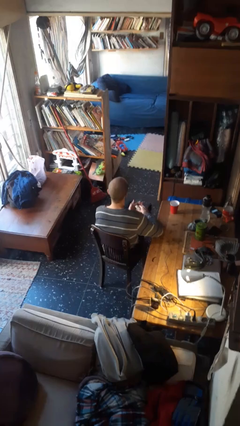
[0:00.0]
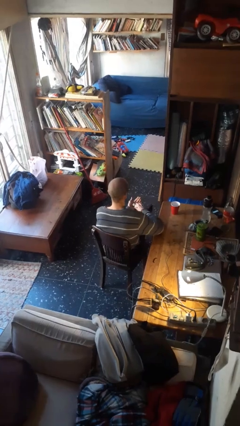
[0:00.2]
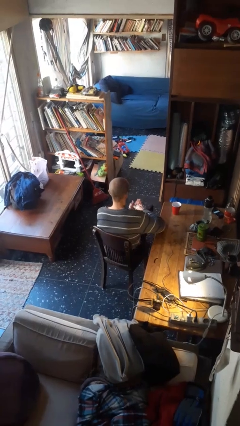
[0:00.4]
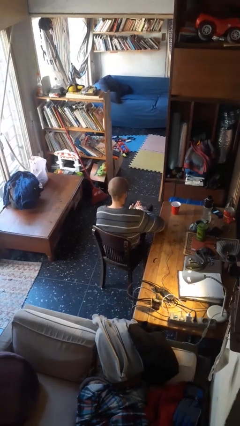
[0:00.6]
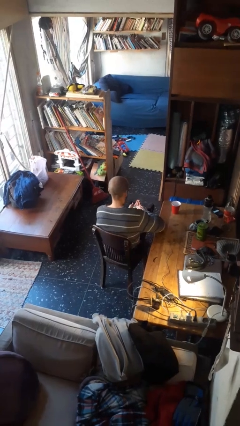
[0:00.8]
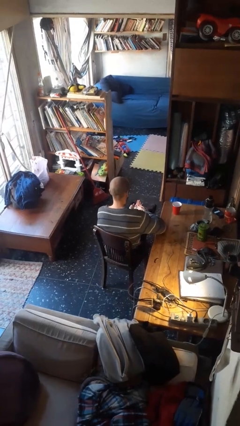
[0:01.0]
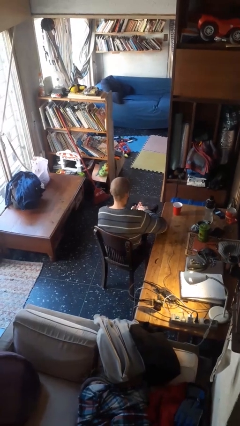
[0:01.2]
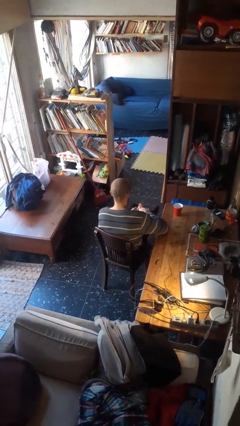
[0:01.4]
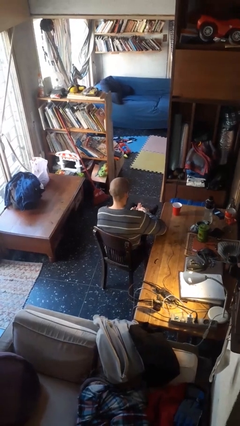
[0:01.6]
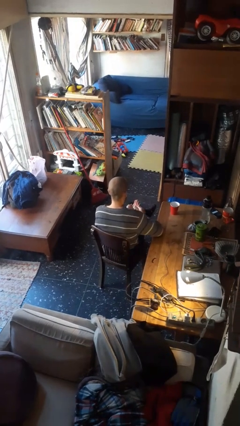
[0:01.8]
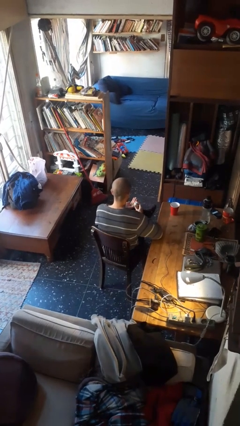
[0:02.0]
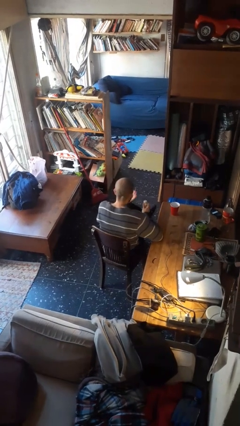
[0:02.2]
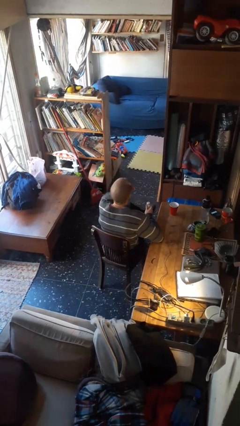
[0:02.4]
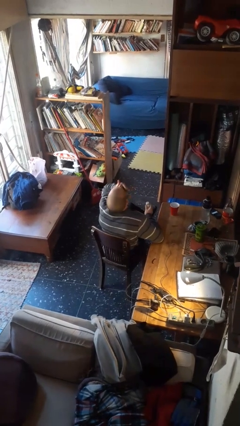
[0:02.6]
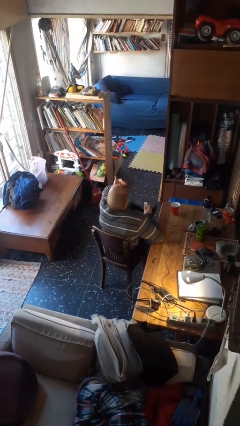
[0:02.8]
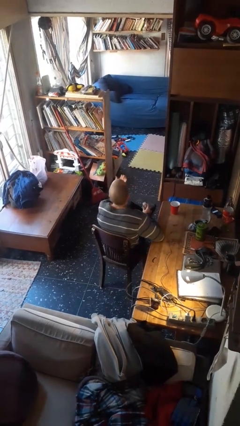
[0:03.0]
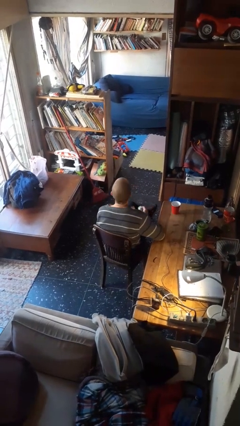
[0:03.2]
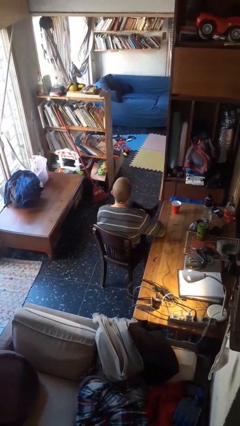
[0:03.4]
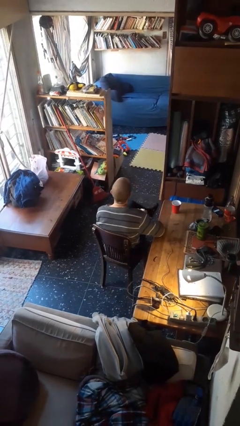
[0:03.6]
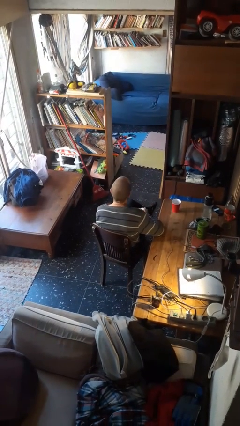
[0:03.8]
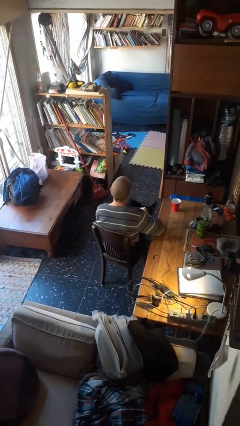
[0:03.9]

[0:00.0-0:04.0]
person takes medicine pills

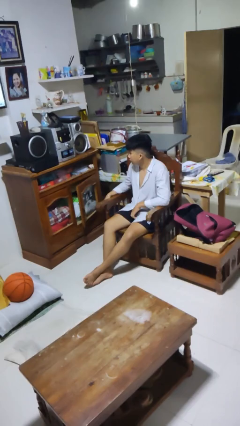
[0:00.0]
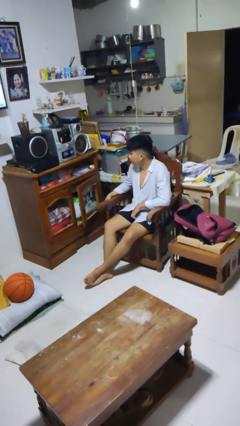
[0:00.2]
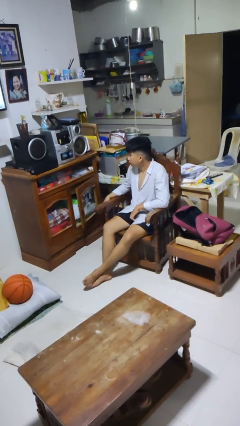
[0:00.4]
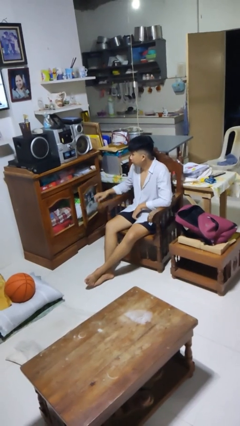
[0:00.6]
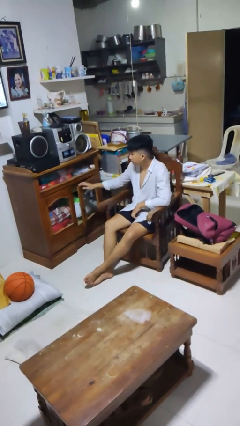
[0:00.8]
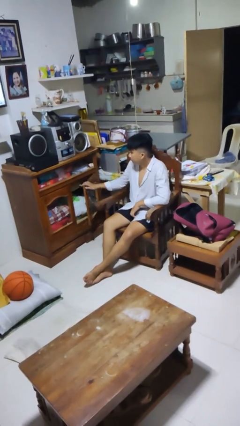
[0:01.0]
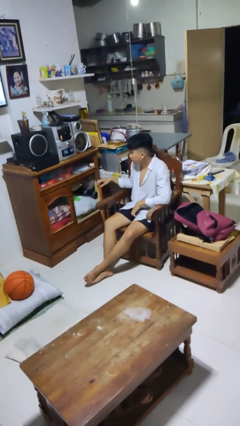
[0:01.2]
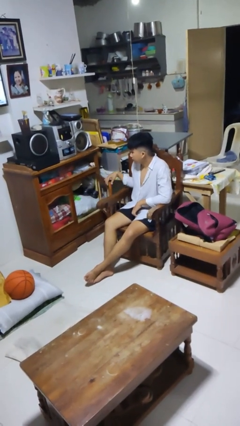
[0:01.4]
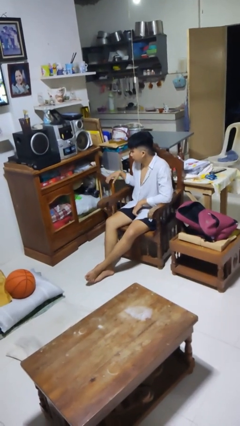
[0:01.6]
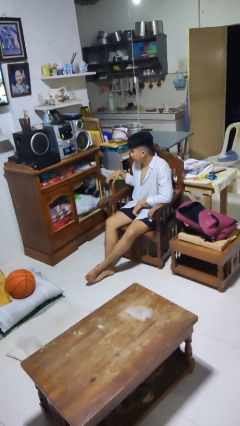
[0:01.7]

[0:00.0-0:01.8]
person opens dresser drawer

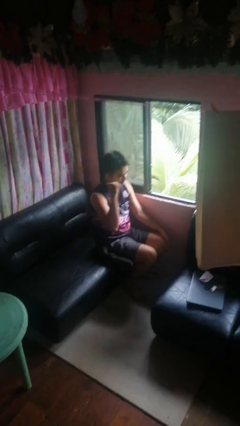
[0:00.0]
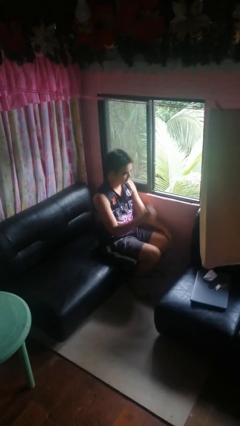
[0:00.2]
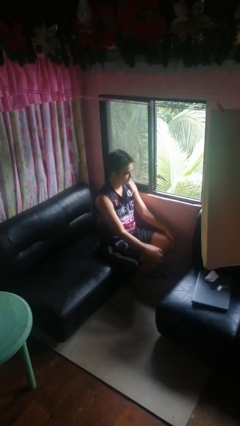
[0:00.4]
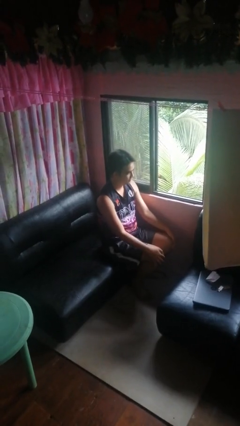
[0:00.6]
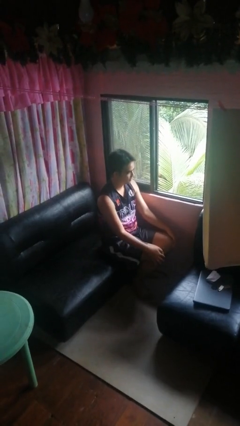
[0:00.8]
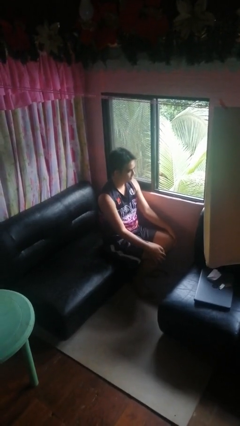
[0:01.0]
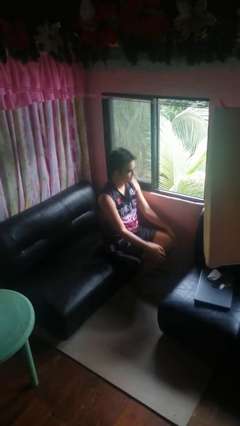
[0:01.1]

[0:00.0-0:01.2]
person gestures behind me

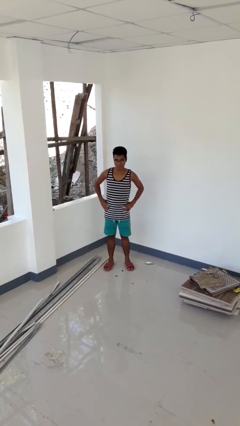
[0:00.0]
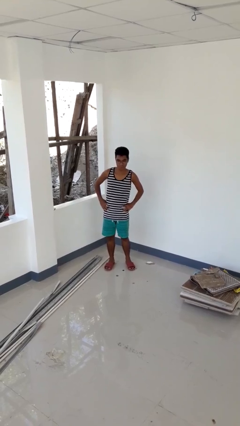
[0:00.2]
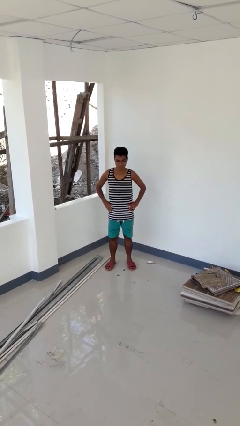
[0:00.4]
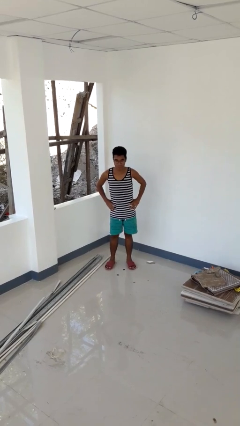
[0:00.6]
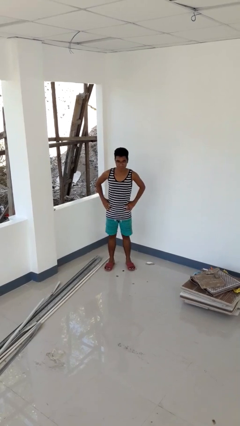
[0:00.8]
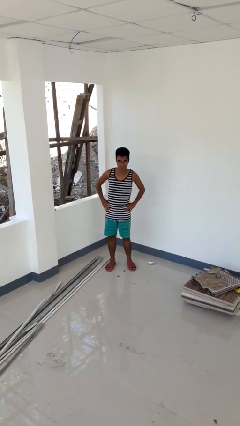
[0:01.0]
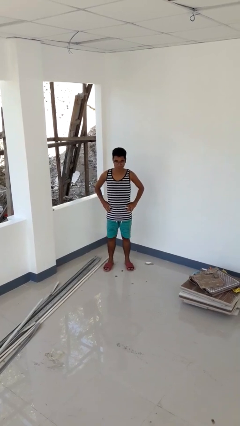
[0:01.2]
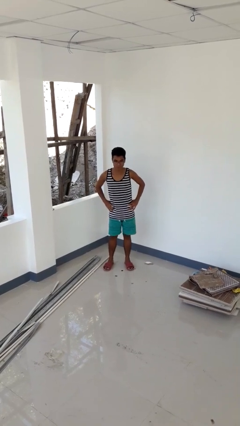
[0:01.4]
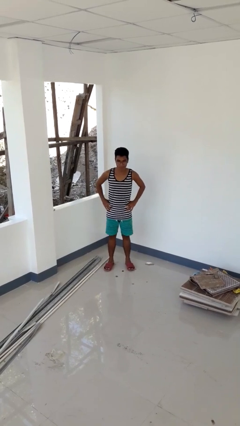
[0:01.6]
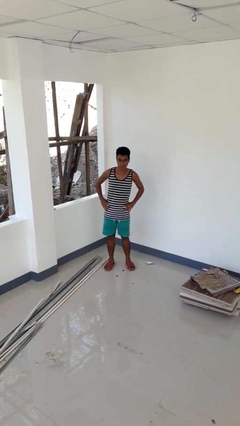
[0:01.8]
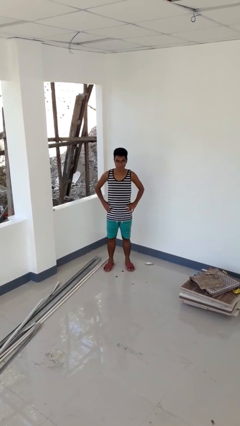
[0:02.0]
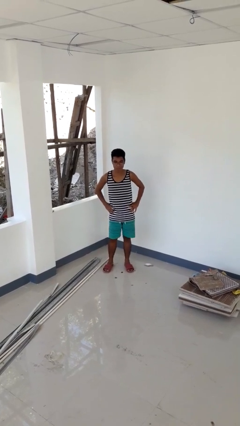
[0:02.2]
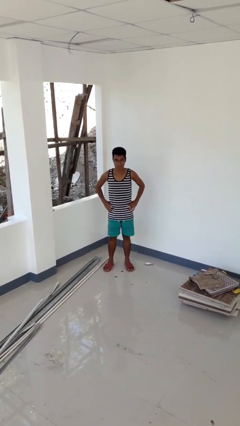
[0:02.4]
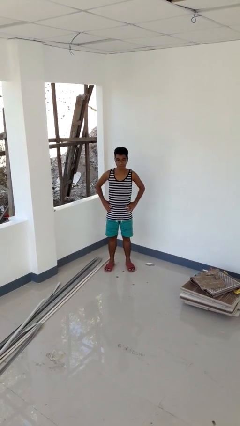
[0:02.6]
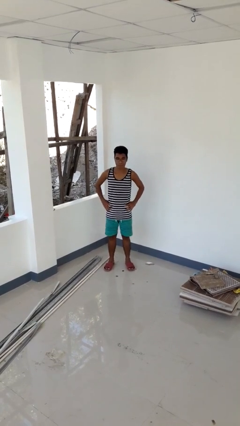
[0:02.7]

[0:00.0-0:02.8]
person wiggles hips

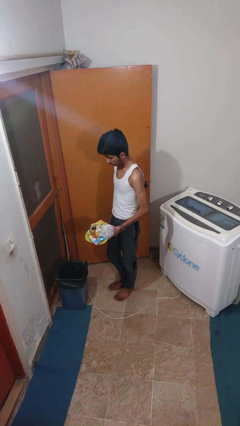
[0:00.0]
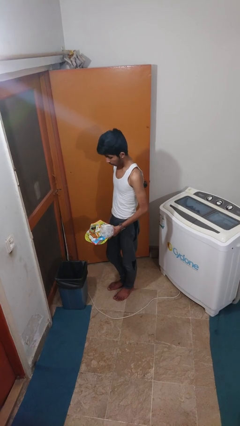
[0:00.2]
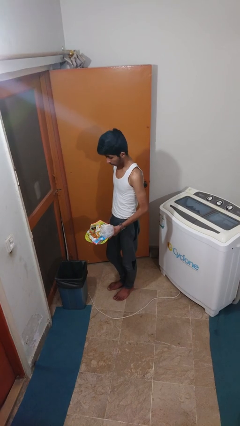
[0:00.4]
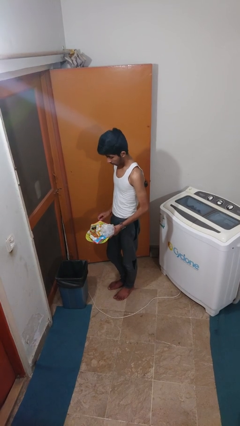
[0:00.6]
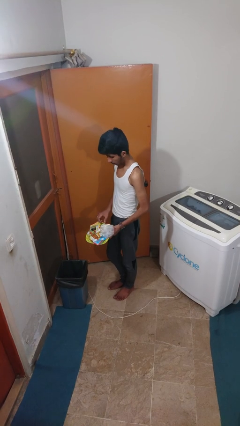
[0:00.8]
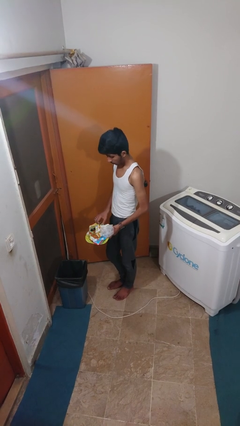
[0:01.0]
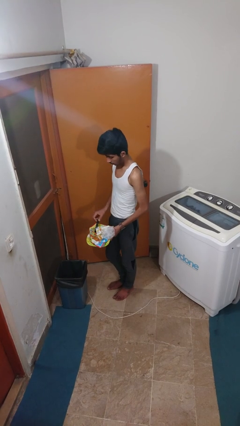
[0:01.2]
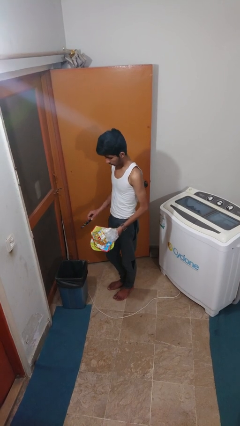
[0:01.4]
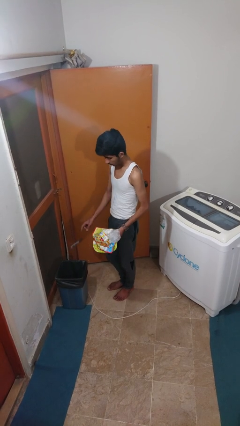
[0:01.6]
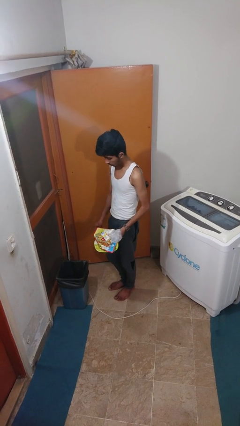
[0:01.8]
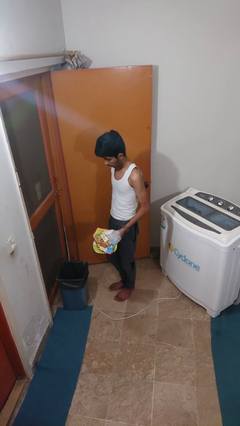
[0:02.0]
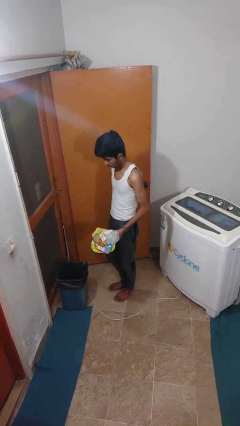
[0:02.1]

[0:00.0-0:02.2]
person discards trash

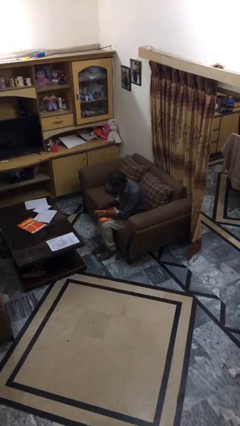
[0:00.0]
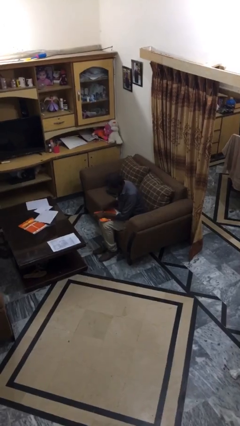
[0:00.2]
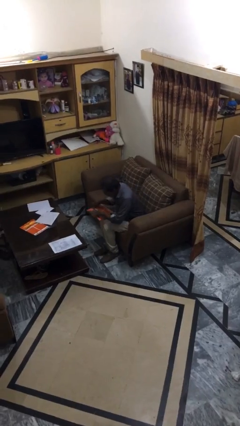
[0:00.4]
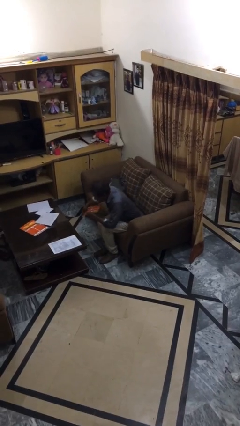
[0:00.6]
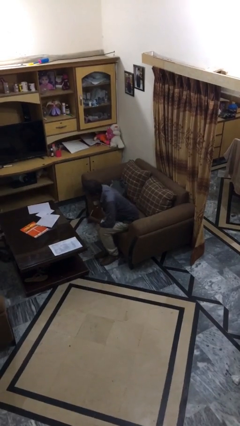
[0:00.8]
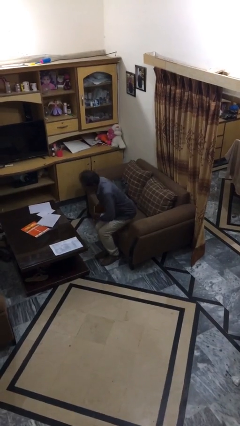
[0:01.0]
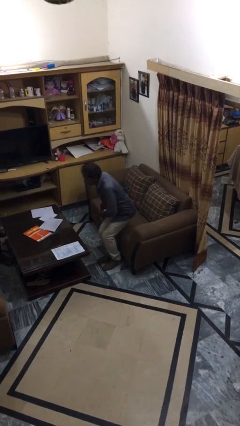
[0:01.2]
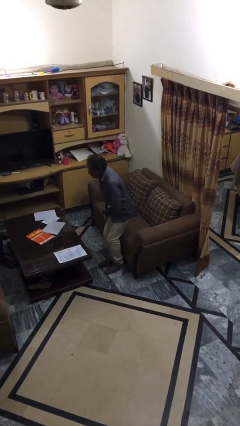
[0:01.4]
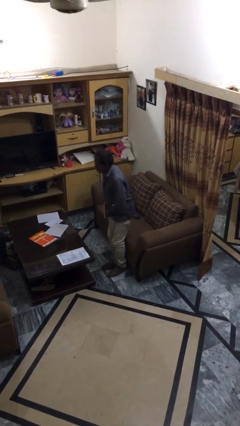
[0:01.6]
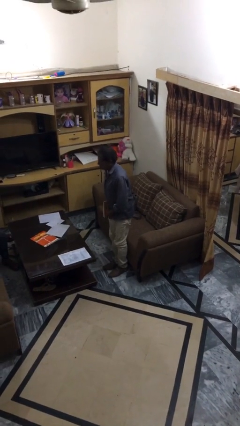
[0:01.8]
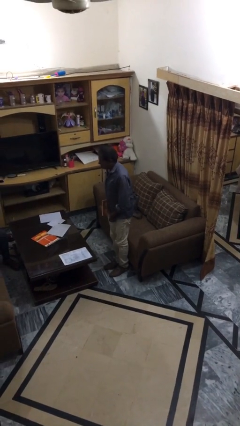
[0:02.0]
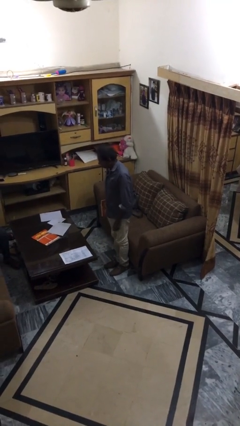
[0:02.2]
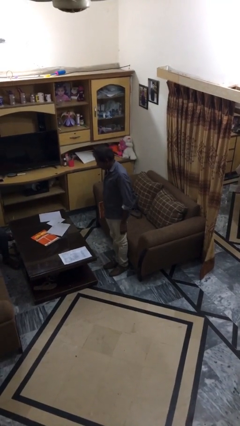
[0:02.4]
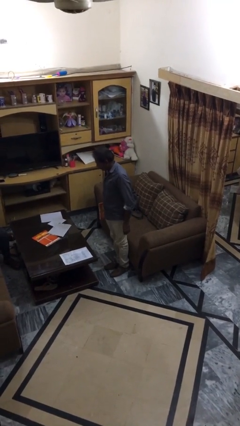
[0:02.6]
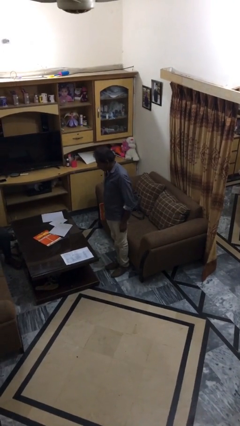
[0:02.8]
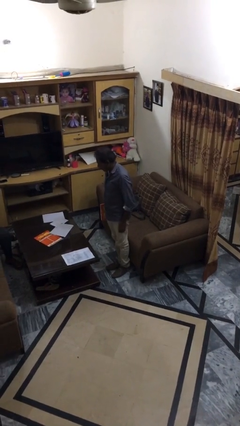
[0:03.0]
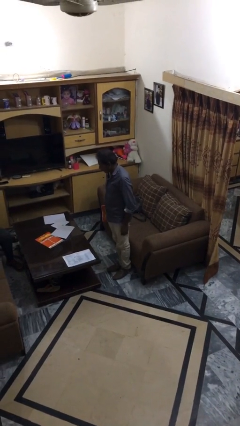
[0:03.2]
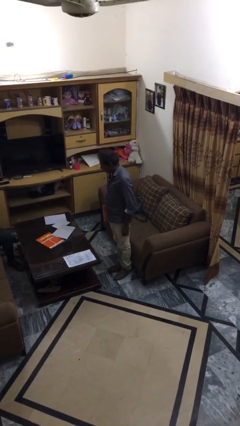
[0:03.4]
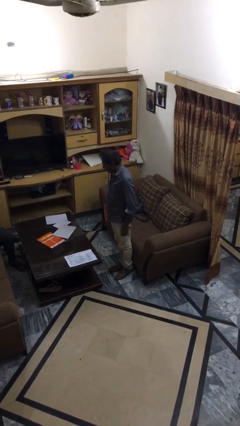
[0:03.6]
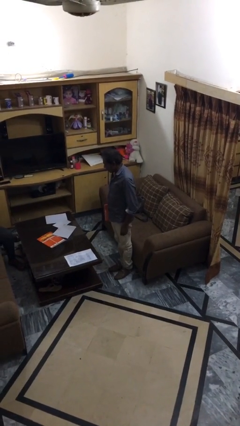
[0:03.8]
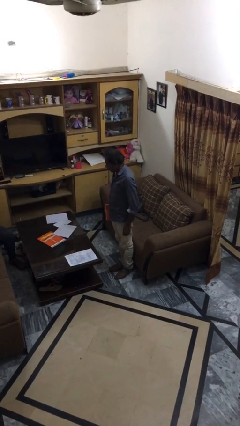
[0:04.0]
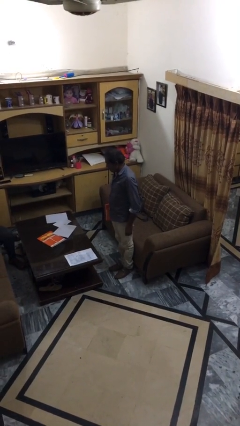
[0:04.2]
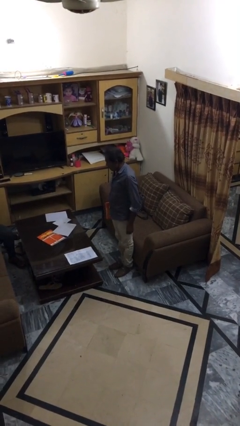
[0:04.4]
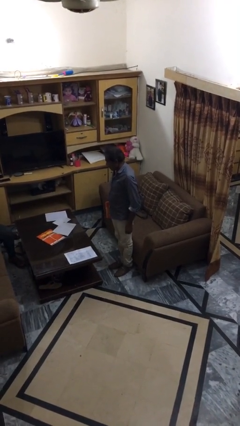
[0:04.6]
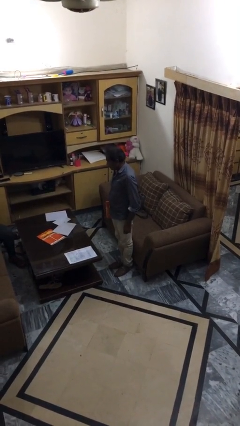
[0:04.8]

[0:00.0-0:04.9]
person stands up

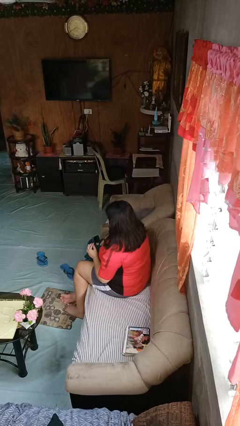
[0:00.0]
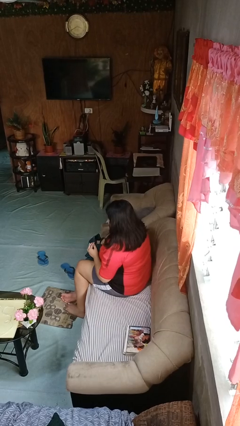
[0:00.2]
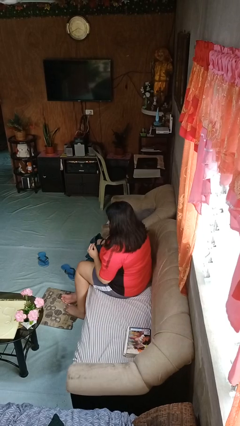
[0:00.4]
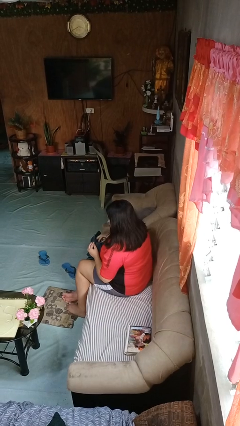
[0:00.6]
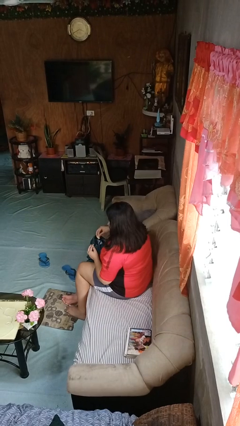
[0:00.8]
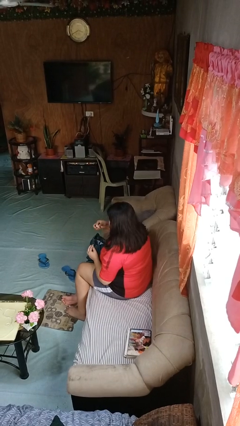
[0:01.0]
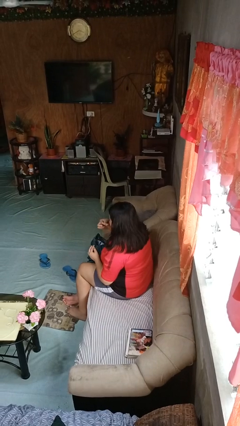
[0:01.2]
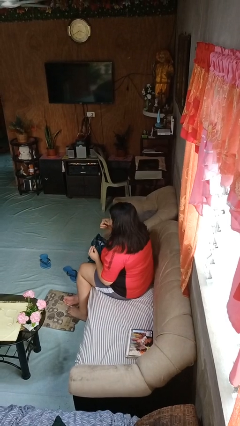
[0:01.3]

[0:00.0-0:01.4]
person eats snack from bag
